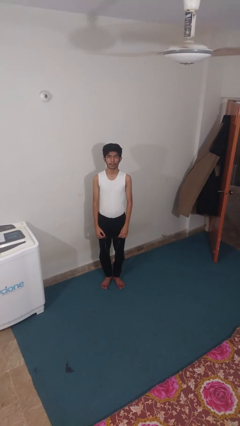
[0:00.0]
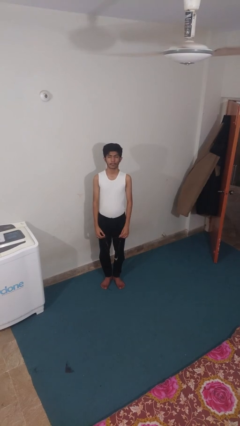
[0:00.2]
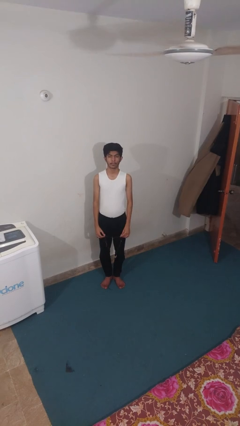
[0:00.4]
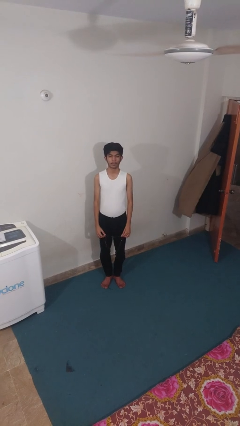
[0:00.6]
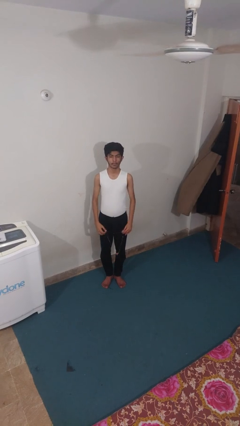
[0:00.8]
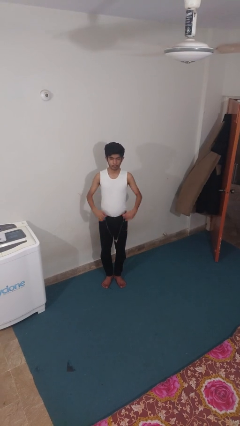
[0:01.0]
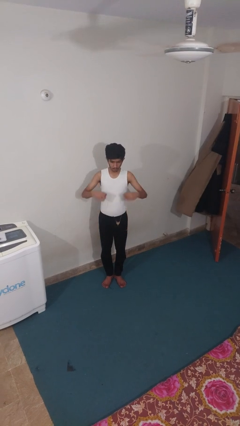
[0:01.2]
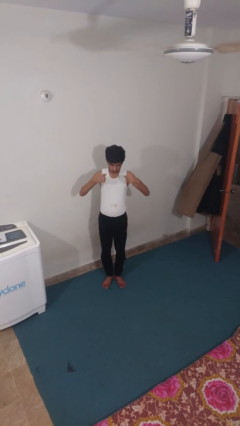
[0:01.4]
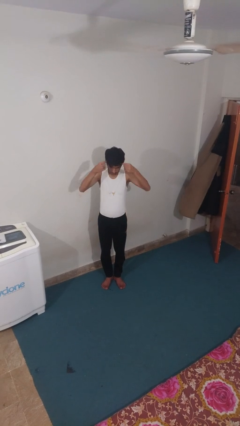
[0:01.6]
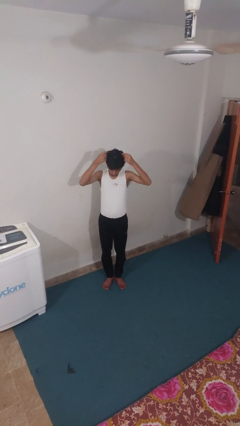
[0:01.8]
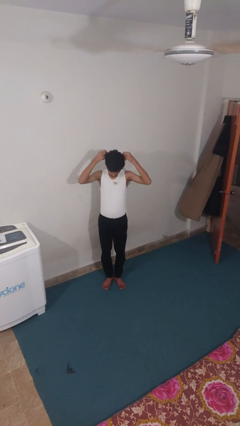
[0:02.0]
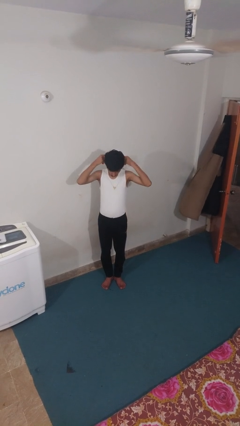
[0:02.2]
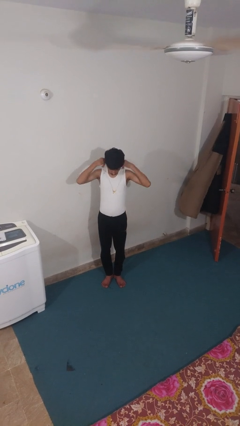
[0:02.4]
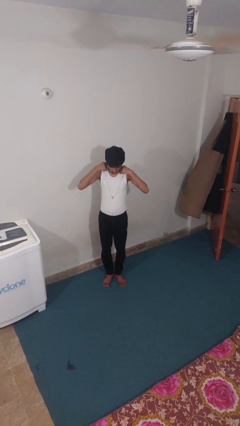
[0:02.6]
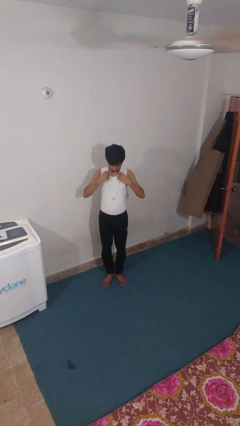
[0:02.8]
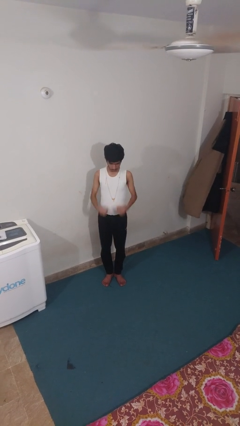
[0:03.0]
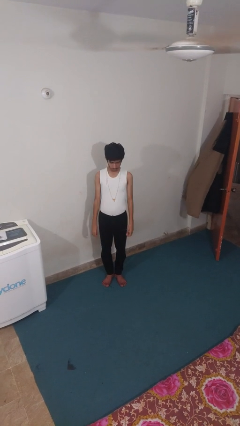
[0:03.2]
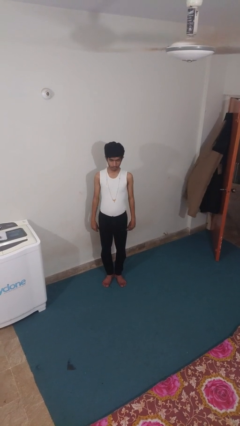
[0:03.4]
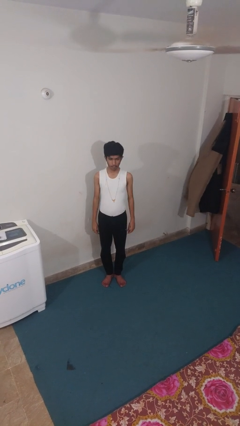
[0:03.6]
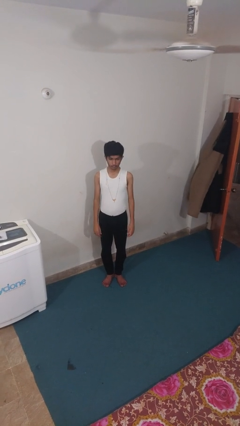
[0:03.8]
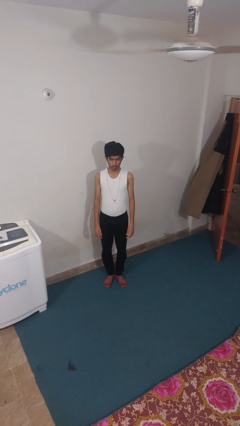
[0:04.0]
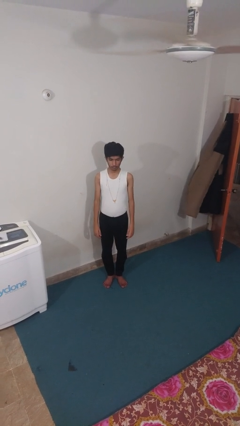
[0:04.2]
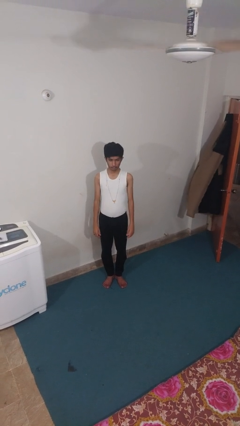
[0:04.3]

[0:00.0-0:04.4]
person puts on necklace

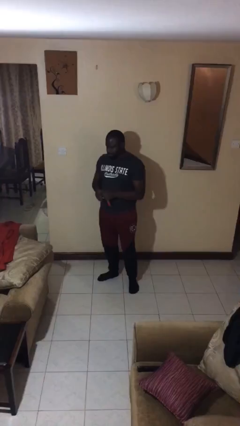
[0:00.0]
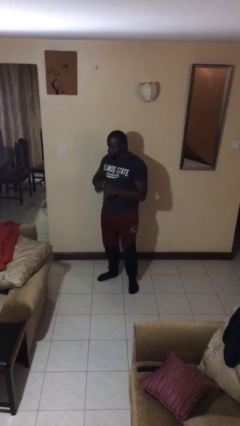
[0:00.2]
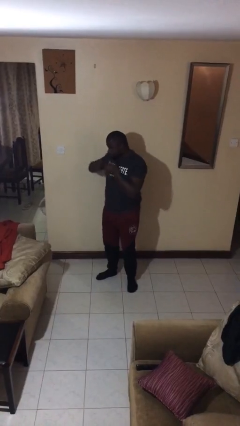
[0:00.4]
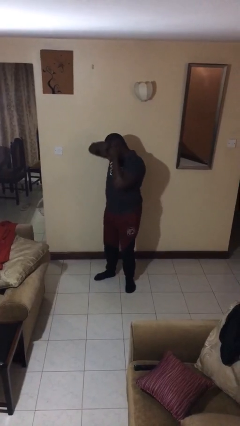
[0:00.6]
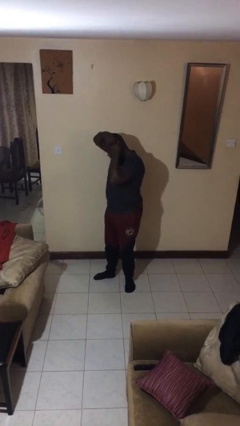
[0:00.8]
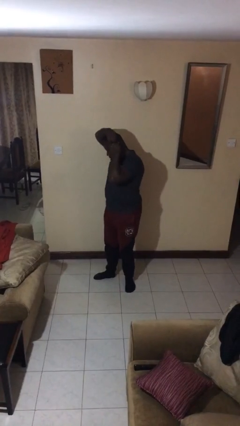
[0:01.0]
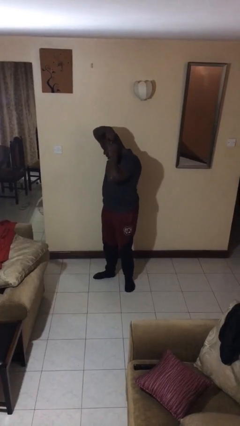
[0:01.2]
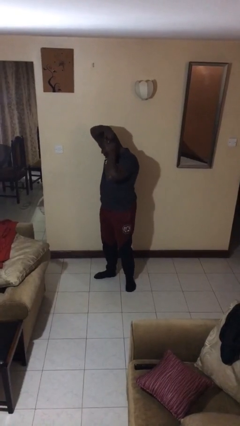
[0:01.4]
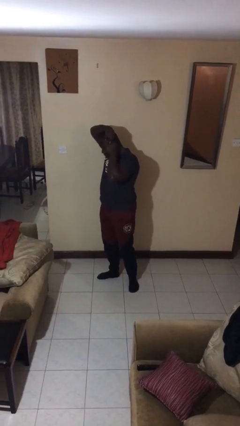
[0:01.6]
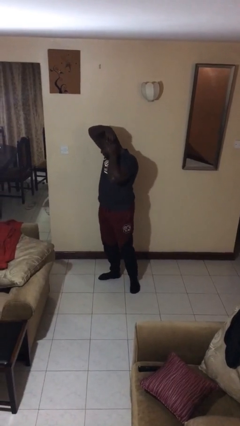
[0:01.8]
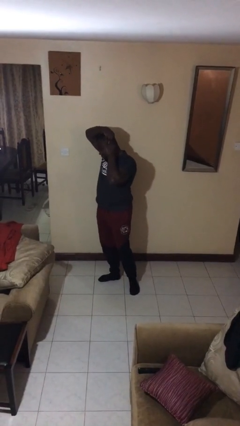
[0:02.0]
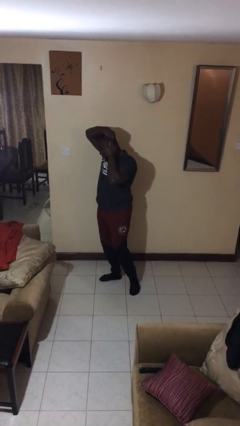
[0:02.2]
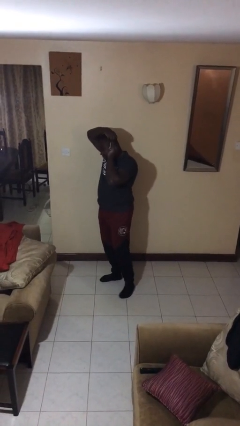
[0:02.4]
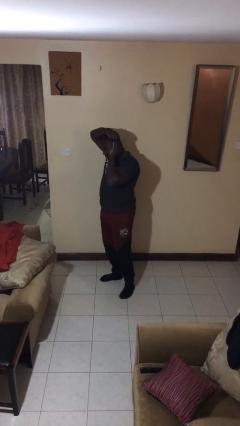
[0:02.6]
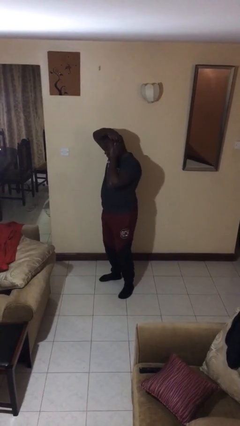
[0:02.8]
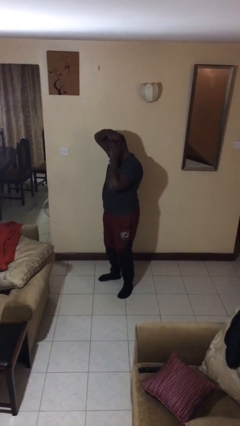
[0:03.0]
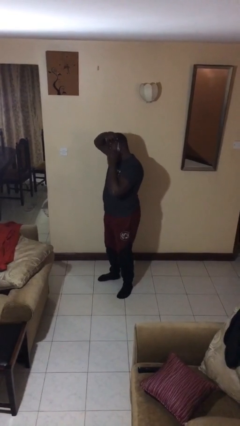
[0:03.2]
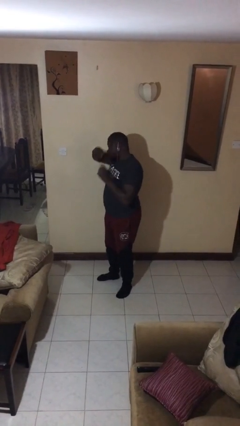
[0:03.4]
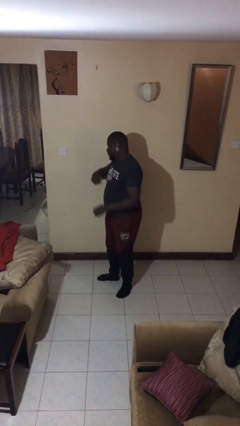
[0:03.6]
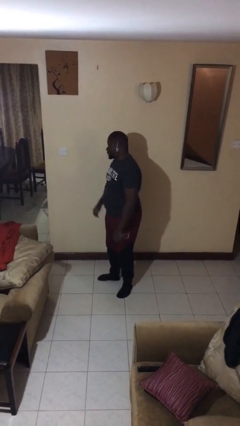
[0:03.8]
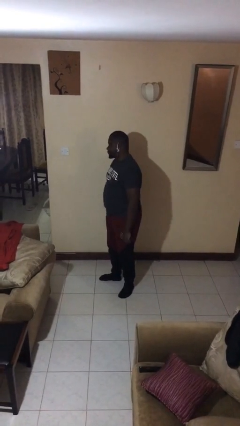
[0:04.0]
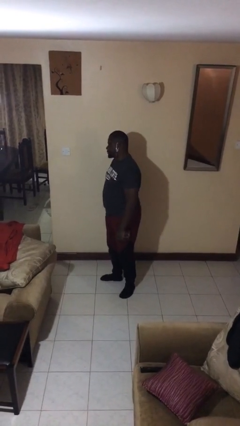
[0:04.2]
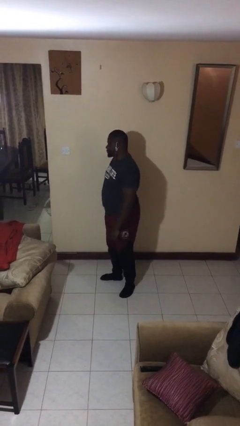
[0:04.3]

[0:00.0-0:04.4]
person puts on earrings

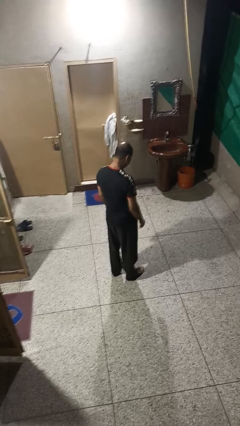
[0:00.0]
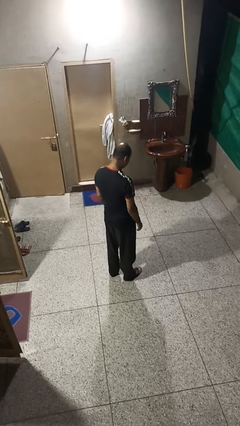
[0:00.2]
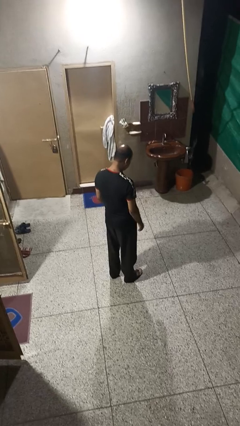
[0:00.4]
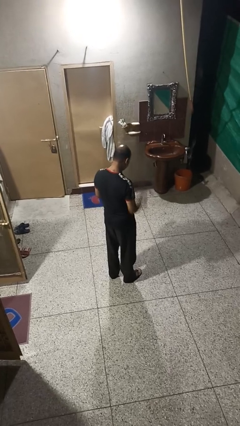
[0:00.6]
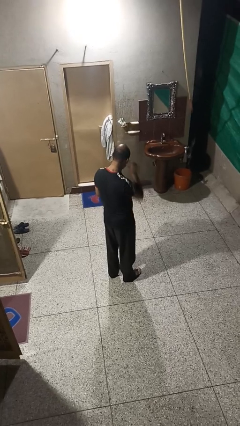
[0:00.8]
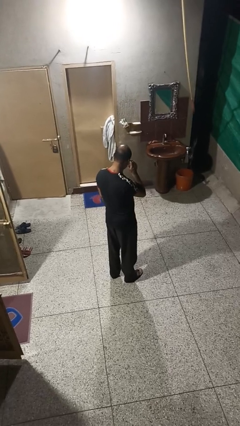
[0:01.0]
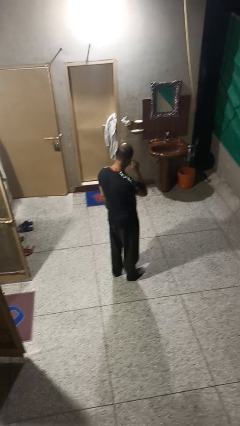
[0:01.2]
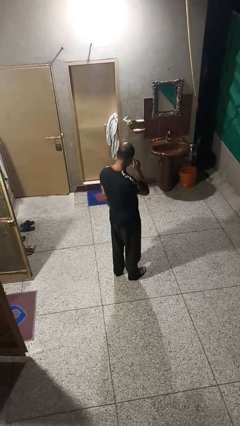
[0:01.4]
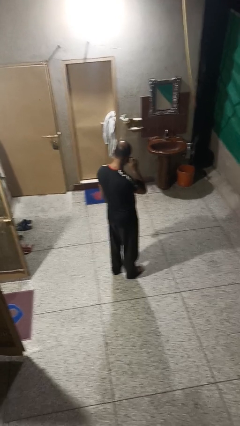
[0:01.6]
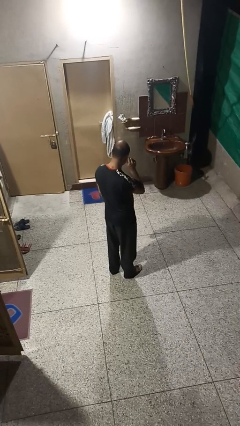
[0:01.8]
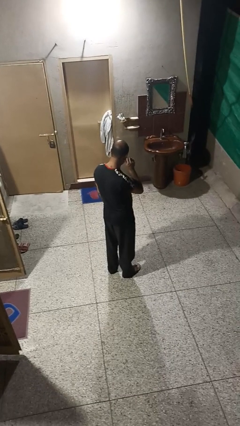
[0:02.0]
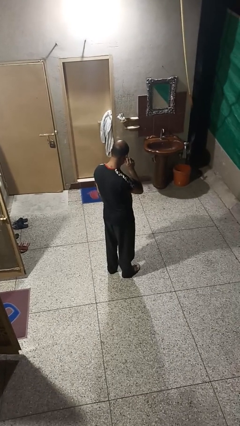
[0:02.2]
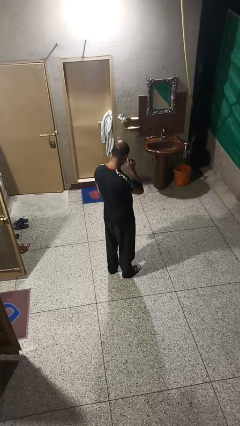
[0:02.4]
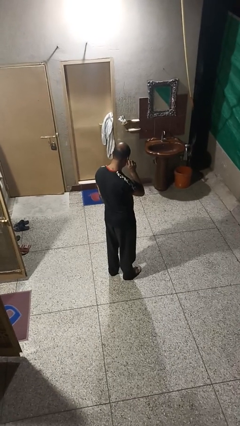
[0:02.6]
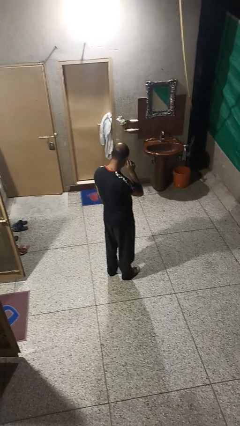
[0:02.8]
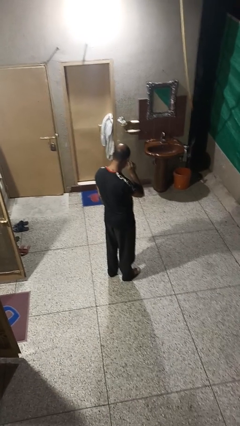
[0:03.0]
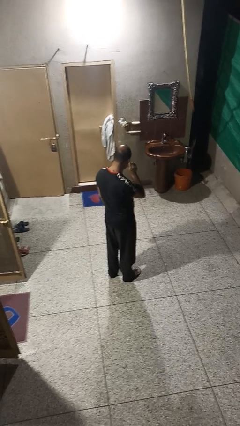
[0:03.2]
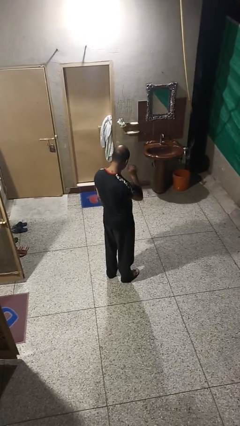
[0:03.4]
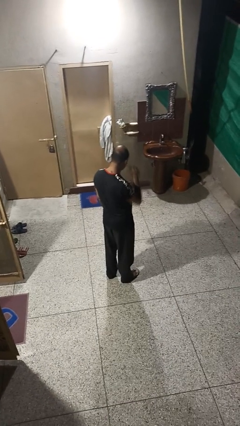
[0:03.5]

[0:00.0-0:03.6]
person touches earlobe

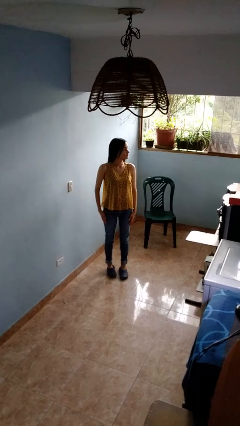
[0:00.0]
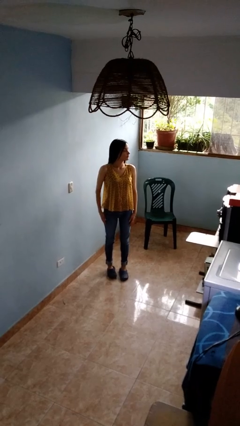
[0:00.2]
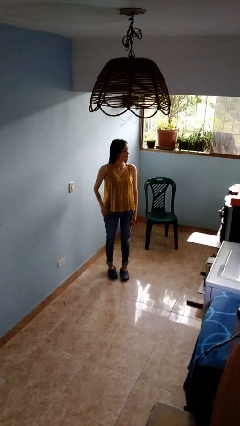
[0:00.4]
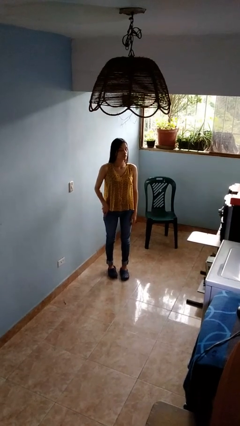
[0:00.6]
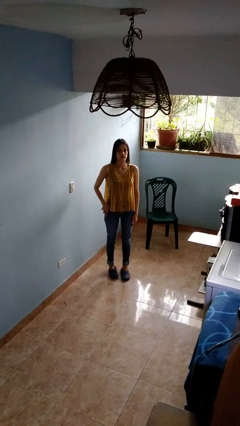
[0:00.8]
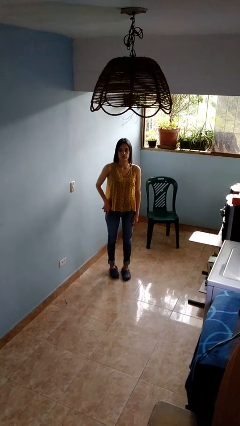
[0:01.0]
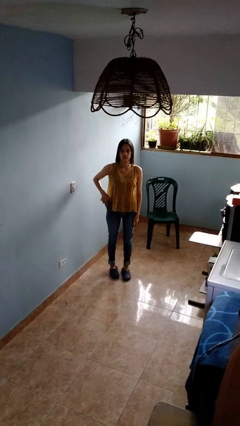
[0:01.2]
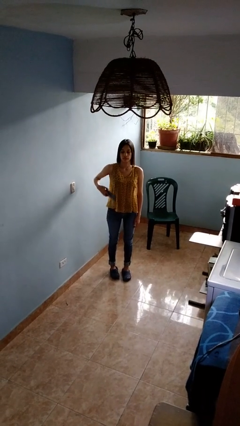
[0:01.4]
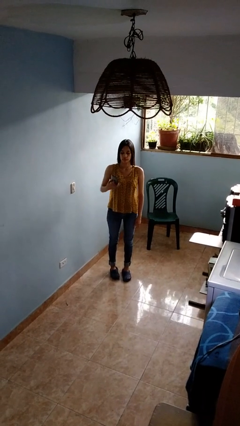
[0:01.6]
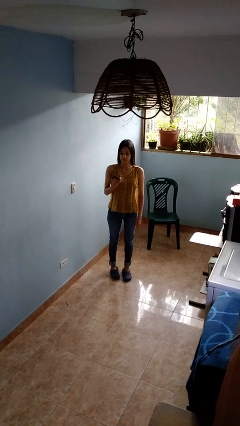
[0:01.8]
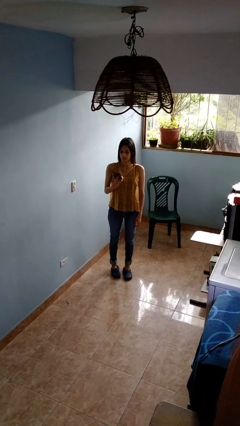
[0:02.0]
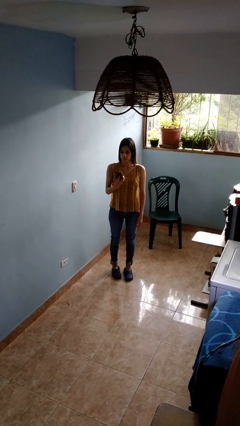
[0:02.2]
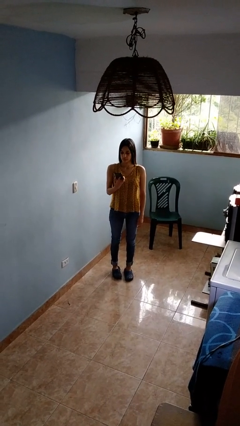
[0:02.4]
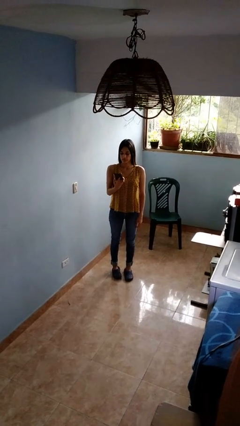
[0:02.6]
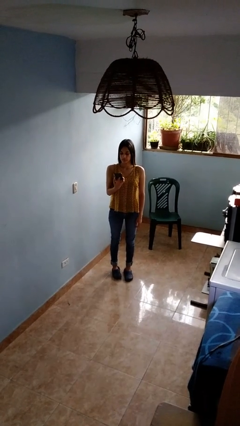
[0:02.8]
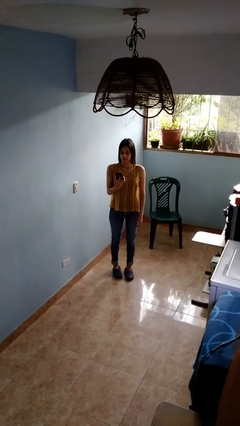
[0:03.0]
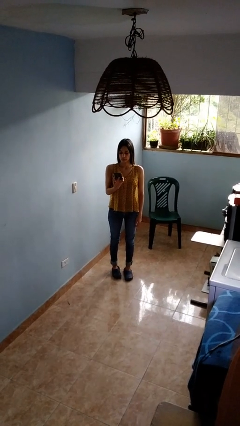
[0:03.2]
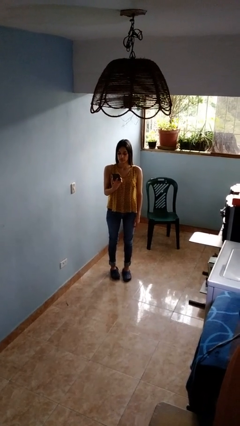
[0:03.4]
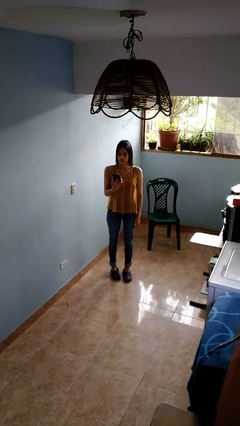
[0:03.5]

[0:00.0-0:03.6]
person takes phone from pocket

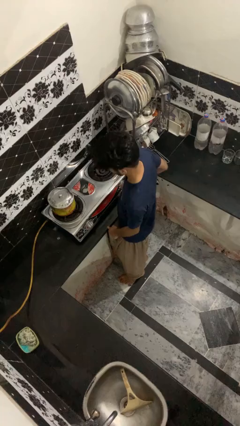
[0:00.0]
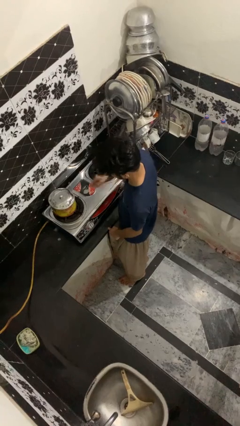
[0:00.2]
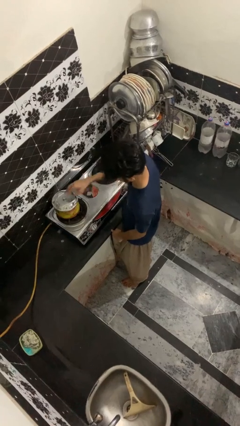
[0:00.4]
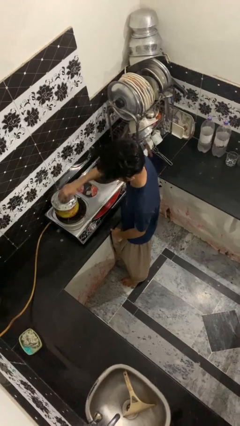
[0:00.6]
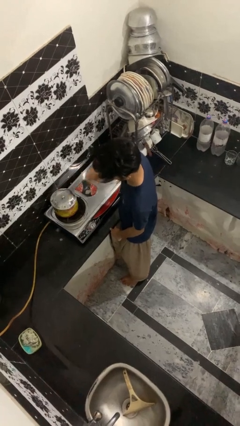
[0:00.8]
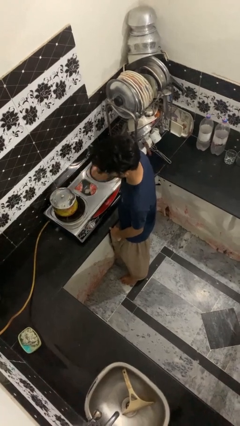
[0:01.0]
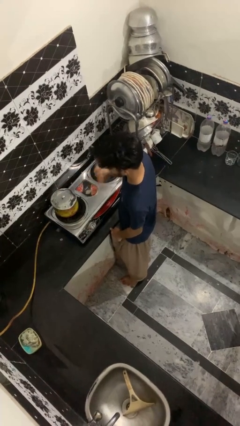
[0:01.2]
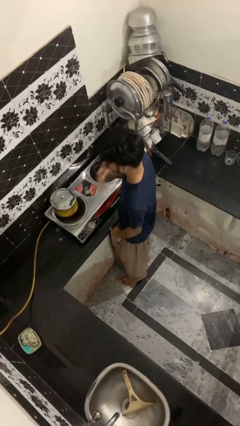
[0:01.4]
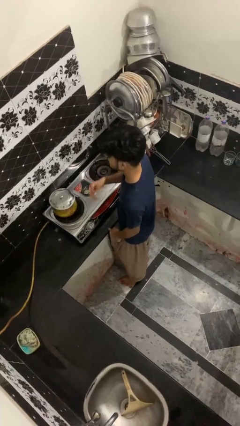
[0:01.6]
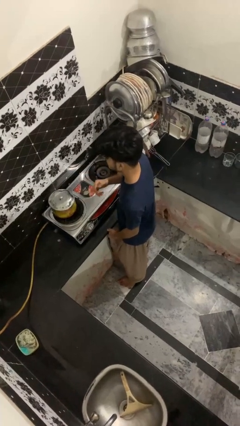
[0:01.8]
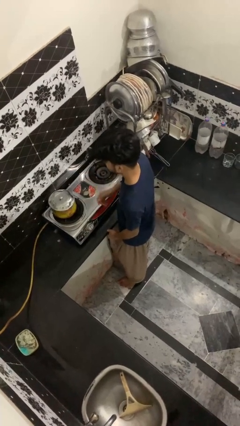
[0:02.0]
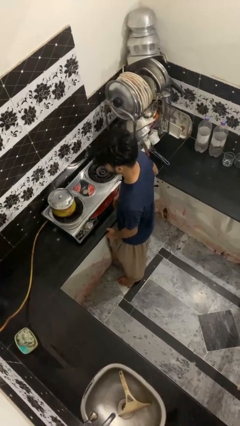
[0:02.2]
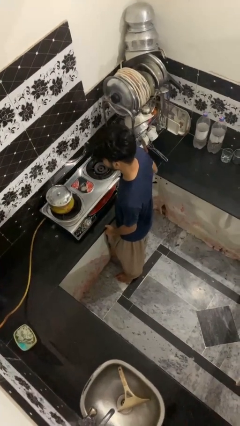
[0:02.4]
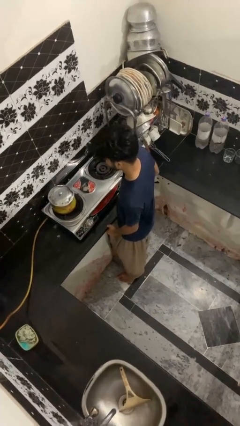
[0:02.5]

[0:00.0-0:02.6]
person burns hand
